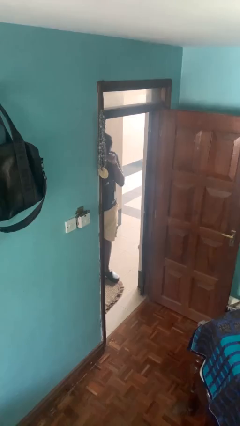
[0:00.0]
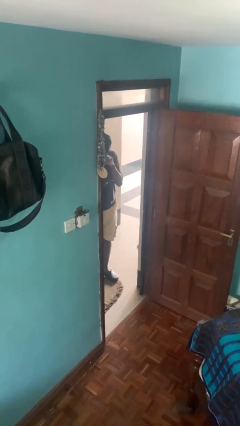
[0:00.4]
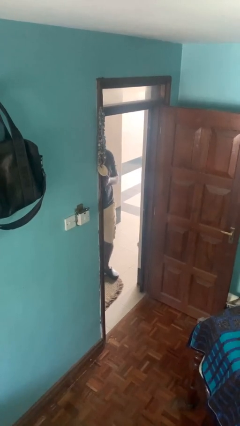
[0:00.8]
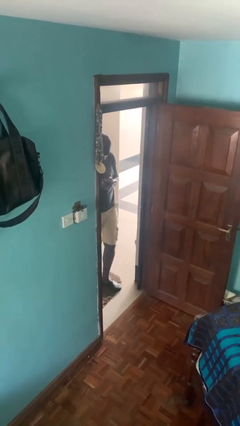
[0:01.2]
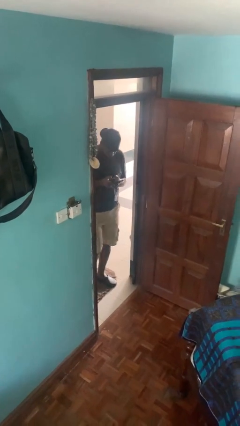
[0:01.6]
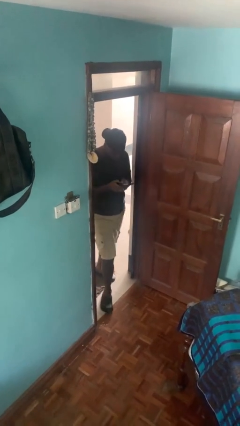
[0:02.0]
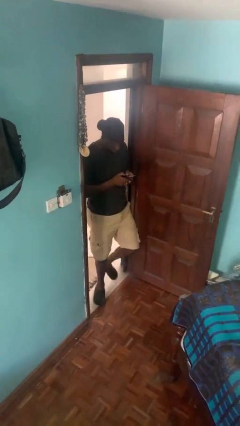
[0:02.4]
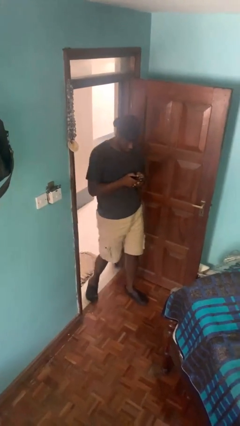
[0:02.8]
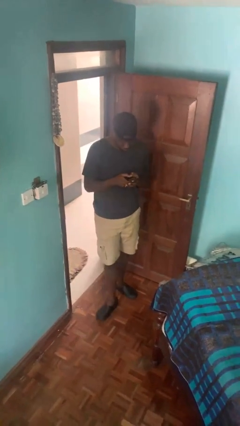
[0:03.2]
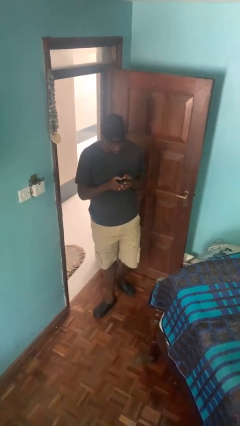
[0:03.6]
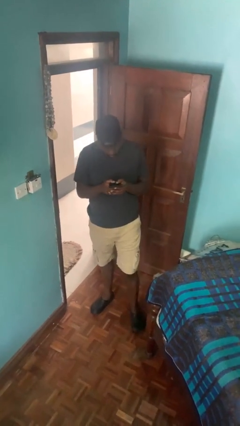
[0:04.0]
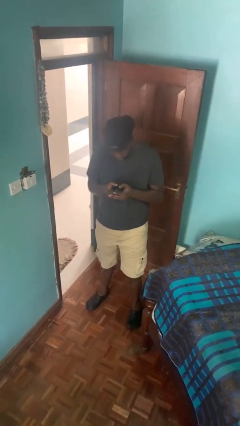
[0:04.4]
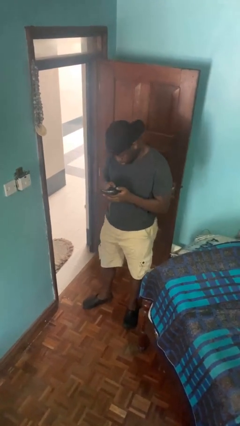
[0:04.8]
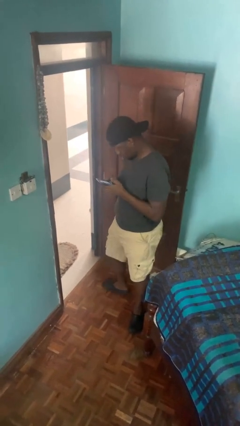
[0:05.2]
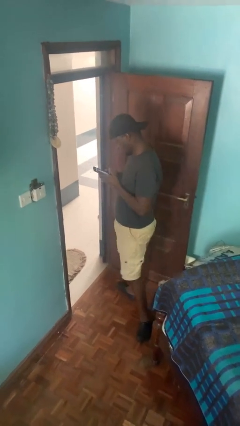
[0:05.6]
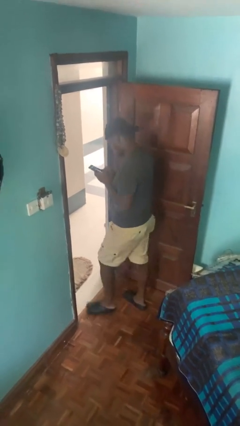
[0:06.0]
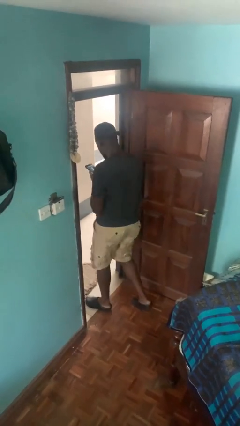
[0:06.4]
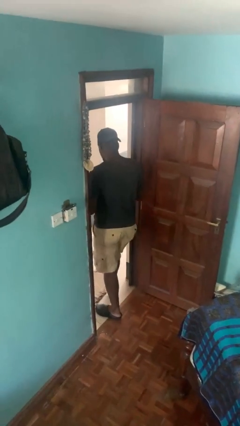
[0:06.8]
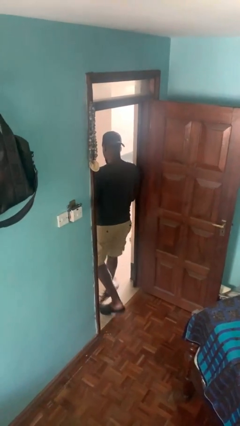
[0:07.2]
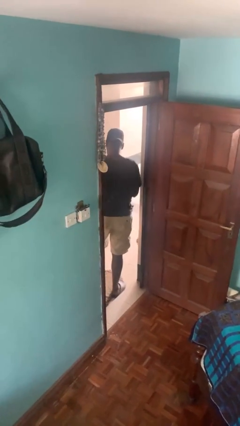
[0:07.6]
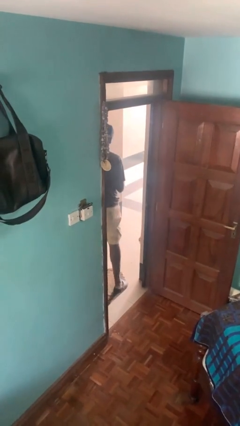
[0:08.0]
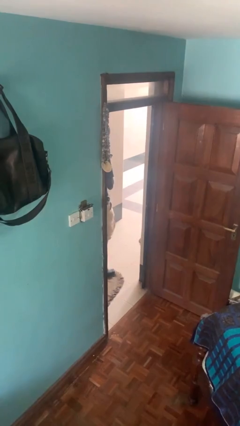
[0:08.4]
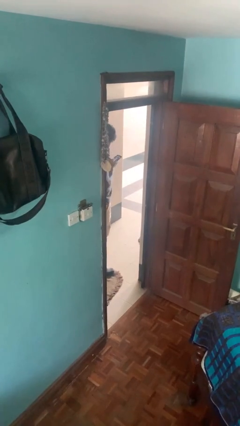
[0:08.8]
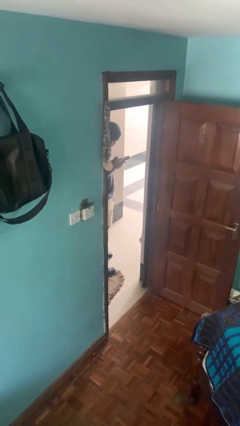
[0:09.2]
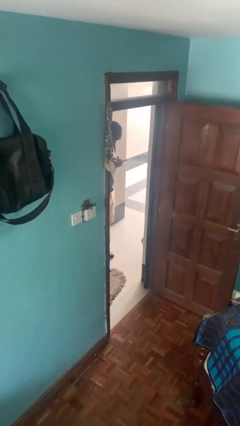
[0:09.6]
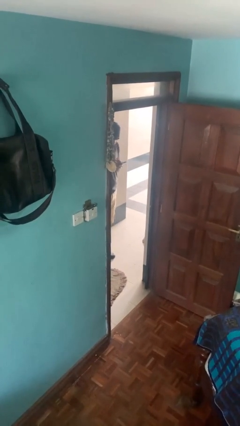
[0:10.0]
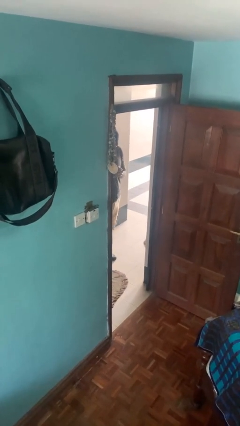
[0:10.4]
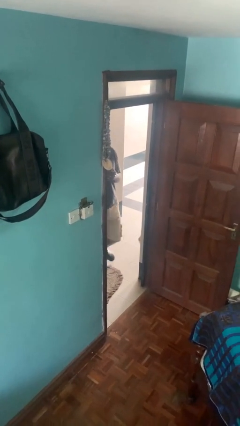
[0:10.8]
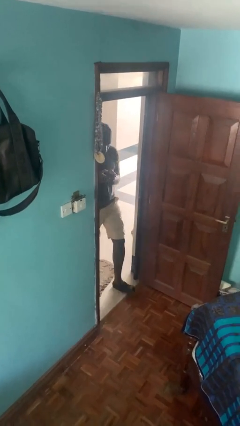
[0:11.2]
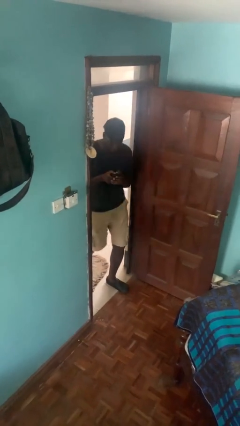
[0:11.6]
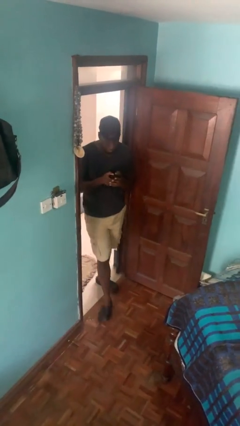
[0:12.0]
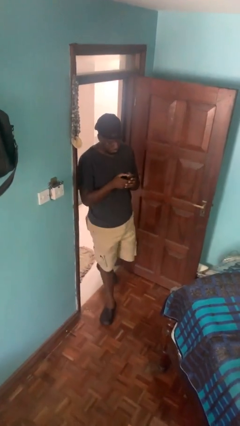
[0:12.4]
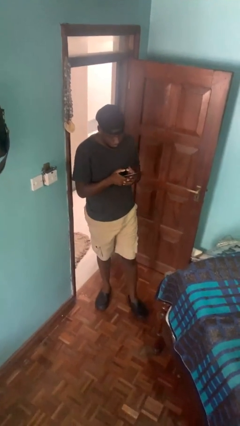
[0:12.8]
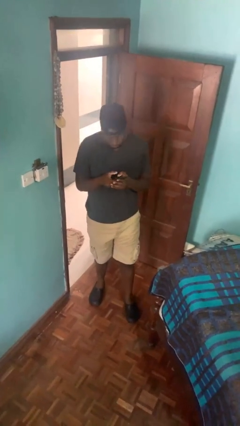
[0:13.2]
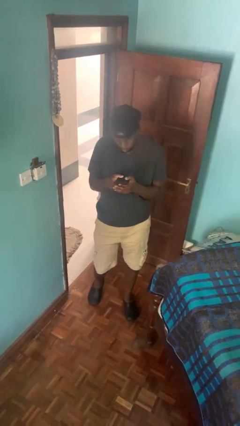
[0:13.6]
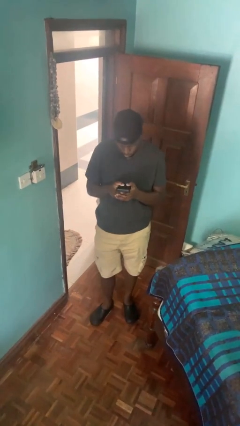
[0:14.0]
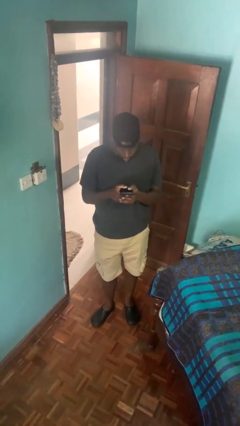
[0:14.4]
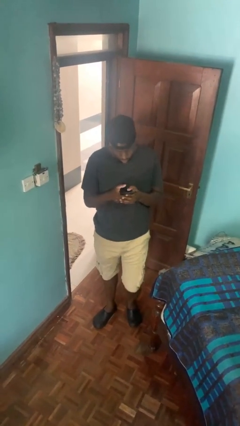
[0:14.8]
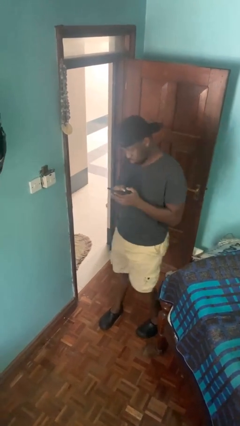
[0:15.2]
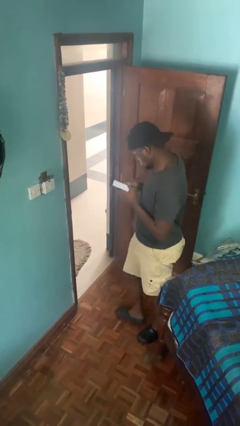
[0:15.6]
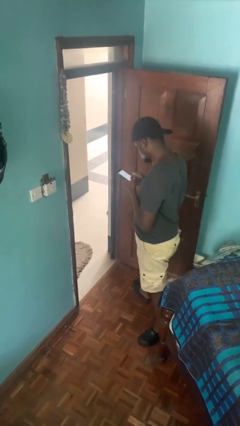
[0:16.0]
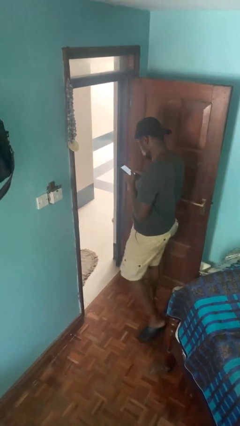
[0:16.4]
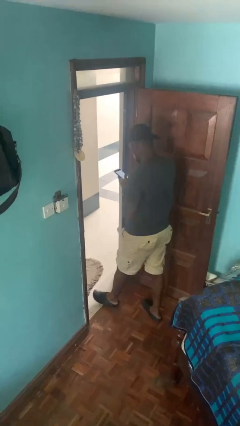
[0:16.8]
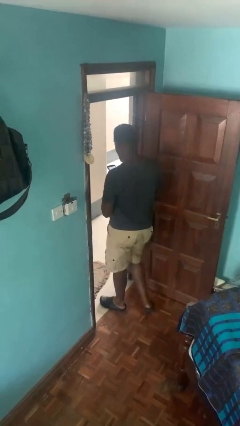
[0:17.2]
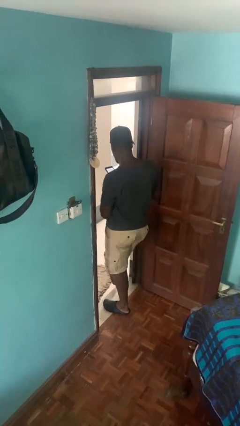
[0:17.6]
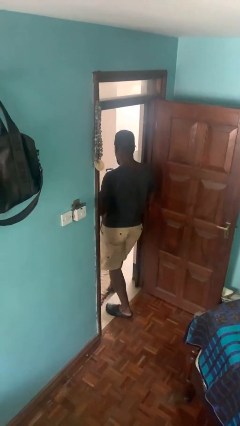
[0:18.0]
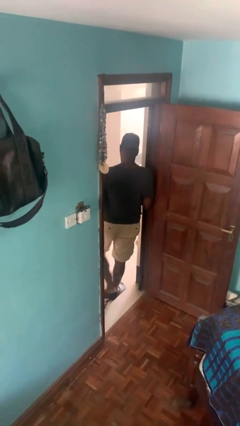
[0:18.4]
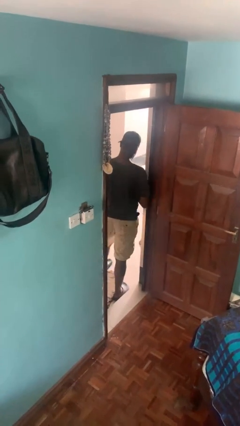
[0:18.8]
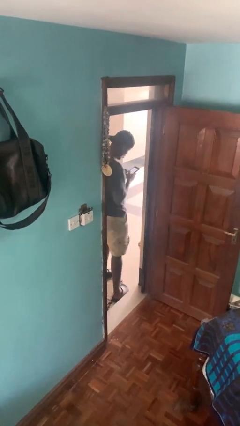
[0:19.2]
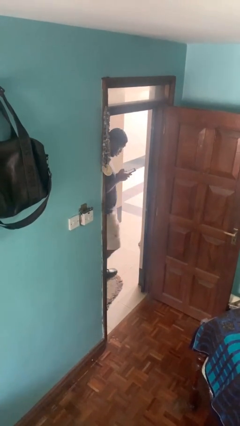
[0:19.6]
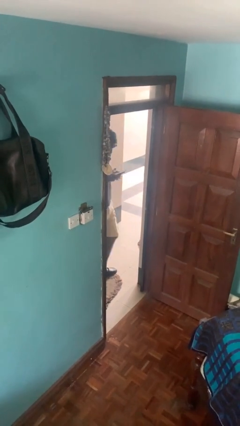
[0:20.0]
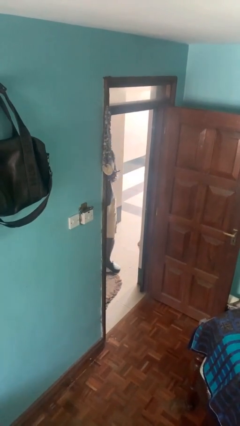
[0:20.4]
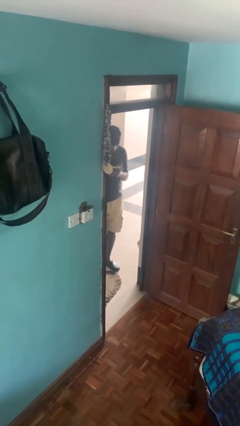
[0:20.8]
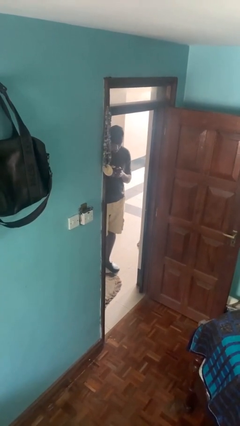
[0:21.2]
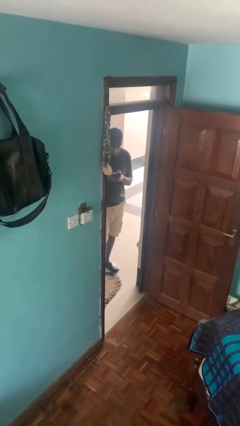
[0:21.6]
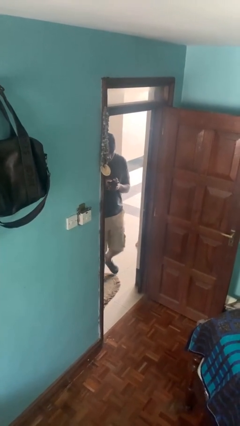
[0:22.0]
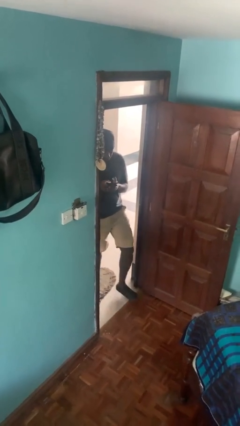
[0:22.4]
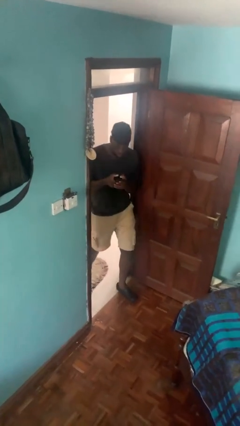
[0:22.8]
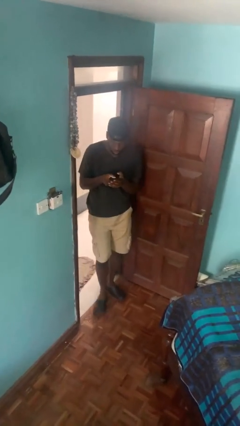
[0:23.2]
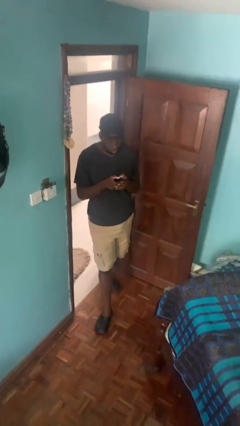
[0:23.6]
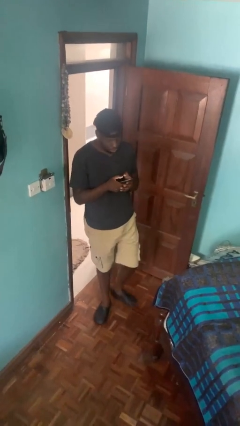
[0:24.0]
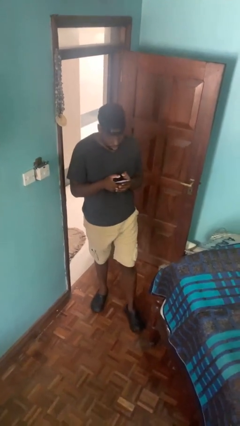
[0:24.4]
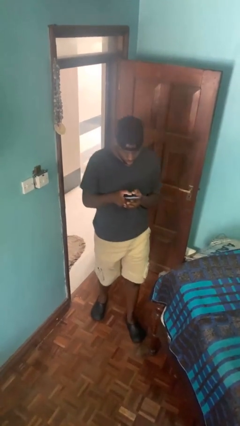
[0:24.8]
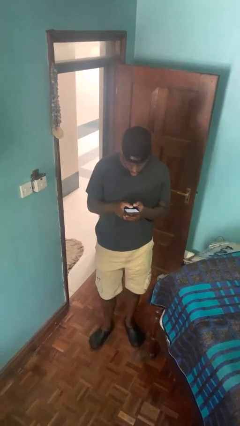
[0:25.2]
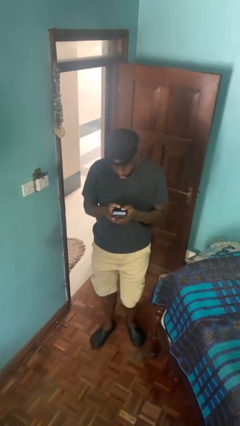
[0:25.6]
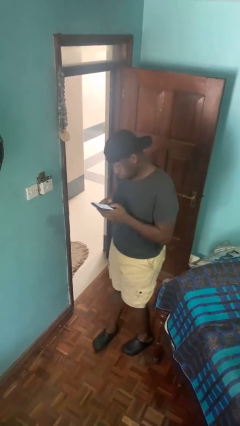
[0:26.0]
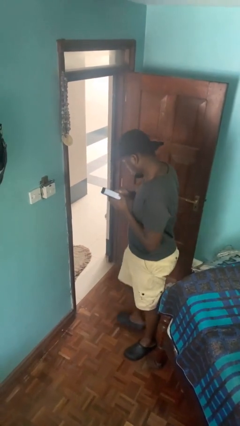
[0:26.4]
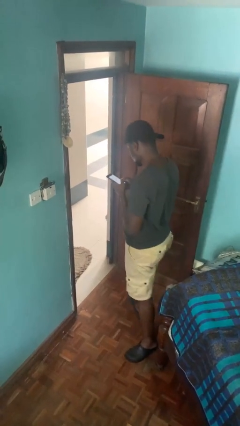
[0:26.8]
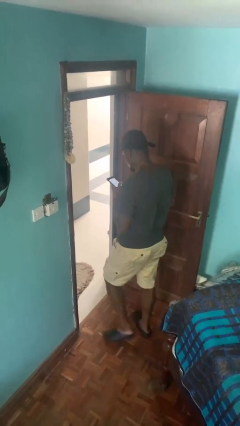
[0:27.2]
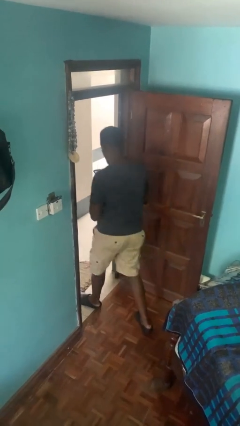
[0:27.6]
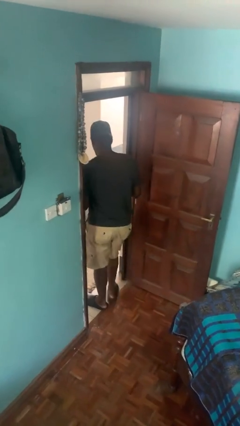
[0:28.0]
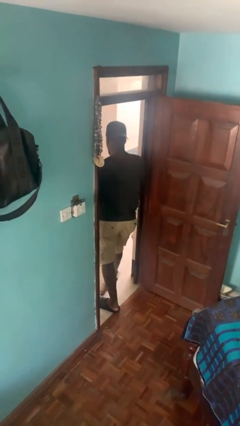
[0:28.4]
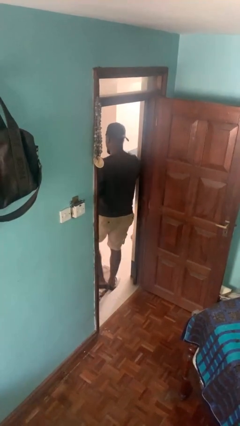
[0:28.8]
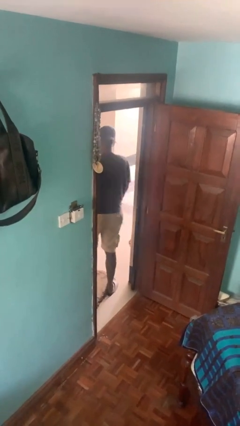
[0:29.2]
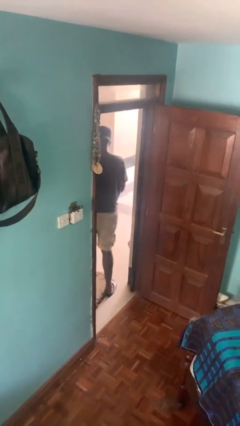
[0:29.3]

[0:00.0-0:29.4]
person texts on phone

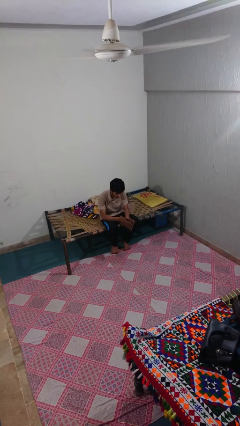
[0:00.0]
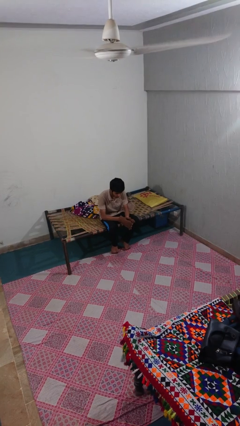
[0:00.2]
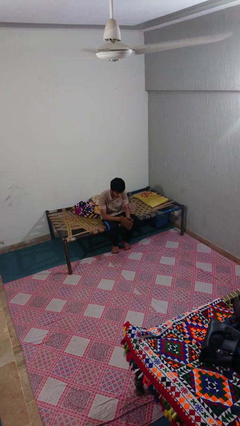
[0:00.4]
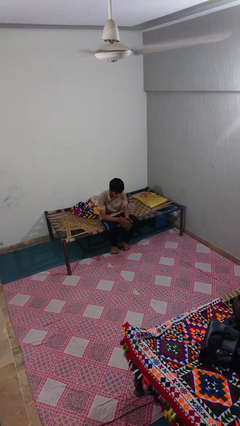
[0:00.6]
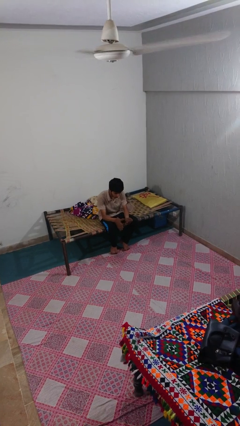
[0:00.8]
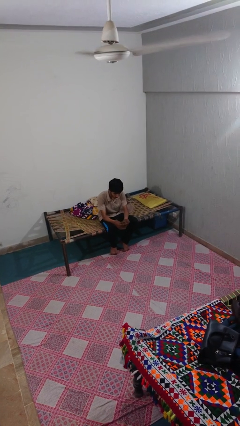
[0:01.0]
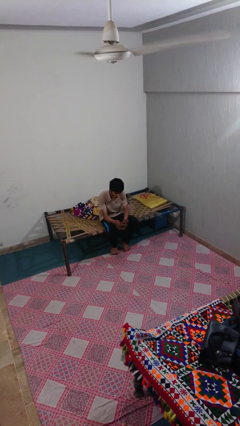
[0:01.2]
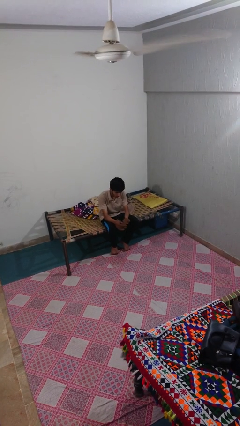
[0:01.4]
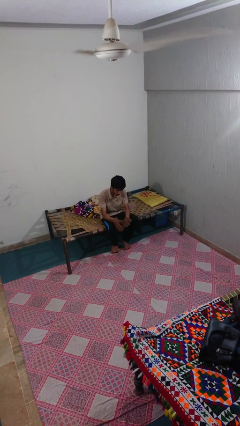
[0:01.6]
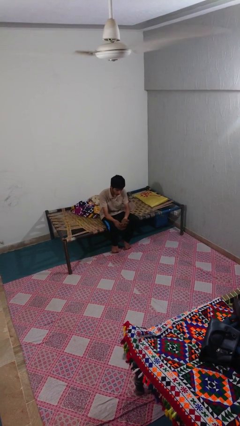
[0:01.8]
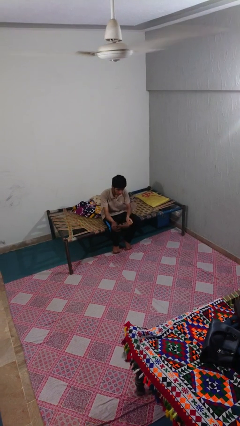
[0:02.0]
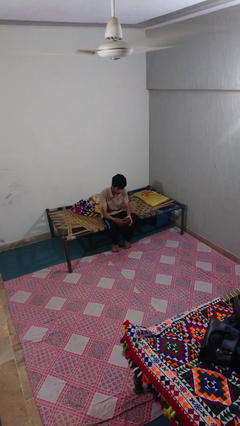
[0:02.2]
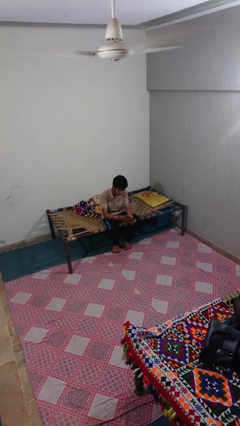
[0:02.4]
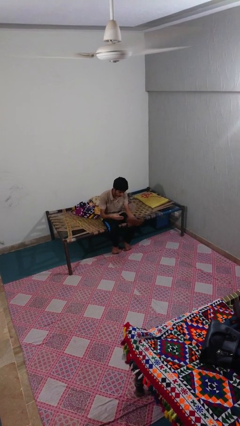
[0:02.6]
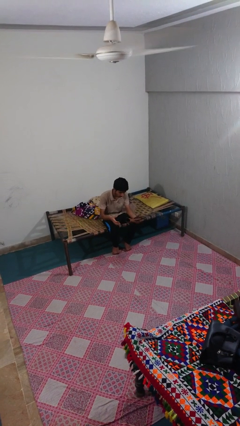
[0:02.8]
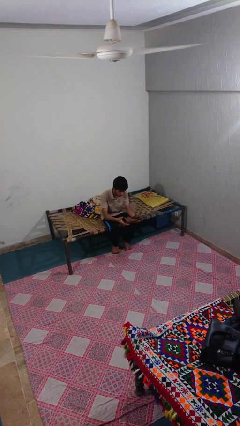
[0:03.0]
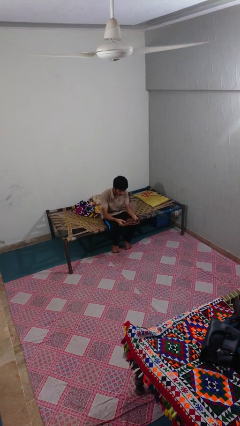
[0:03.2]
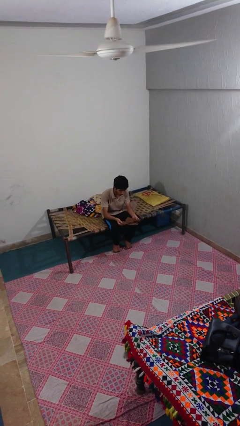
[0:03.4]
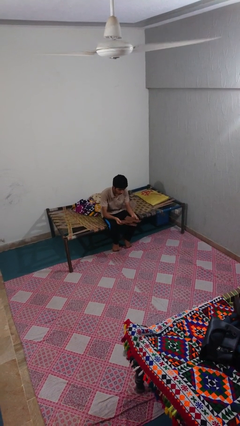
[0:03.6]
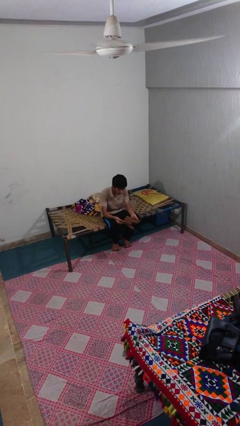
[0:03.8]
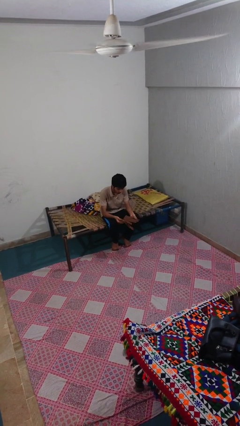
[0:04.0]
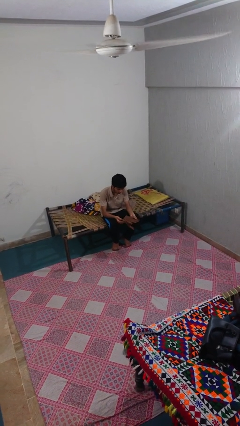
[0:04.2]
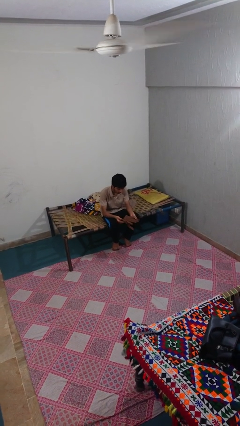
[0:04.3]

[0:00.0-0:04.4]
person takes off gloves
